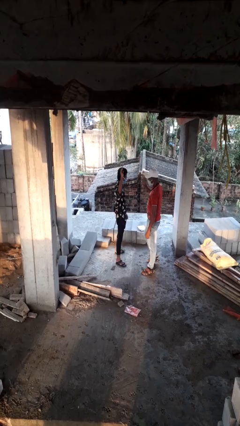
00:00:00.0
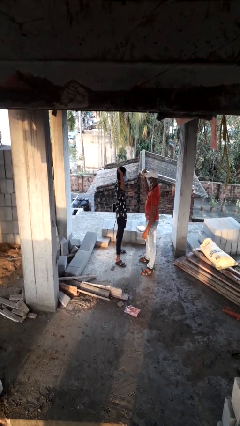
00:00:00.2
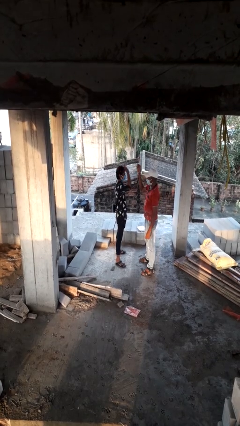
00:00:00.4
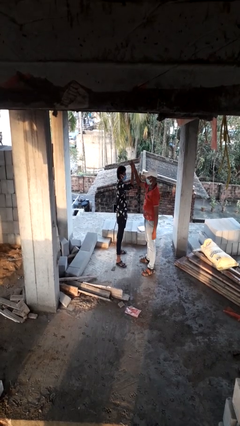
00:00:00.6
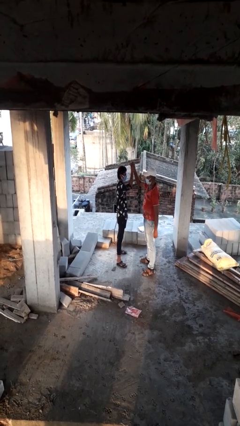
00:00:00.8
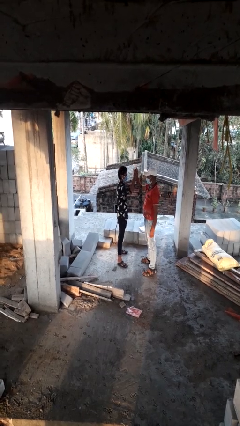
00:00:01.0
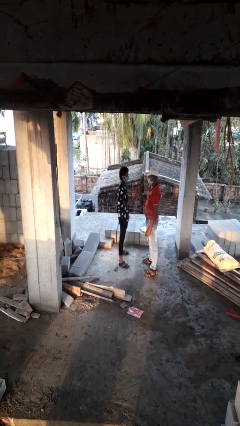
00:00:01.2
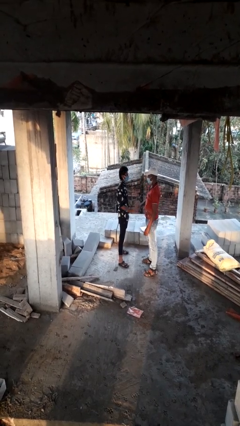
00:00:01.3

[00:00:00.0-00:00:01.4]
person highfives hand

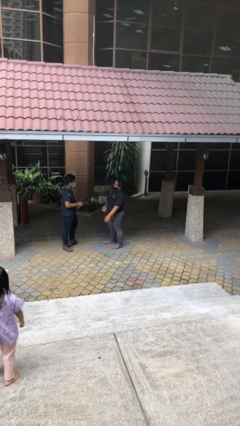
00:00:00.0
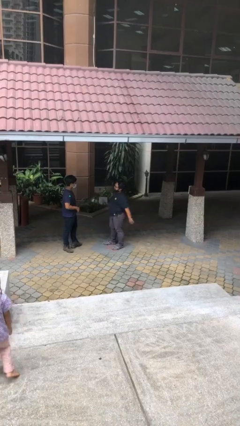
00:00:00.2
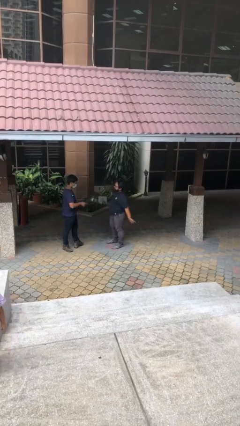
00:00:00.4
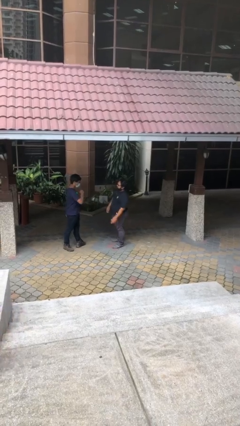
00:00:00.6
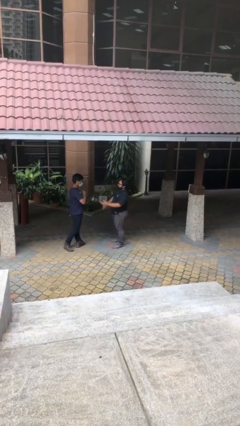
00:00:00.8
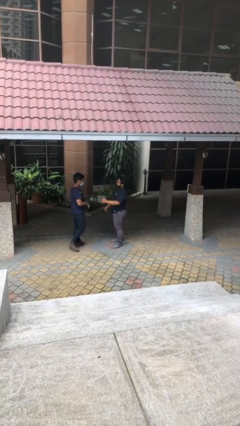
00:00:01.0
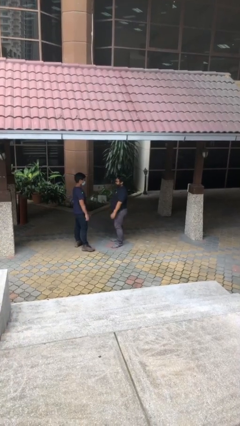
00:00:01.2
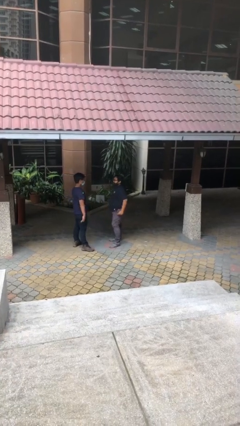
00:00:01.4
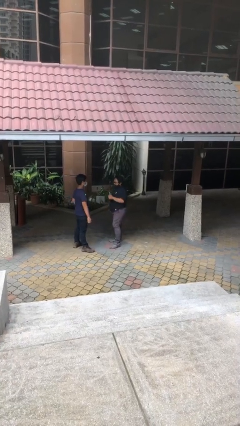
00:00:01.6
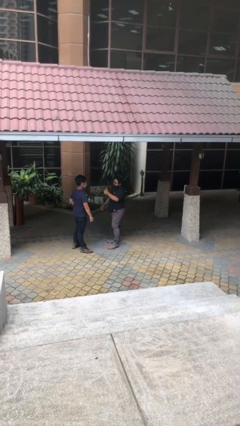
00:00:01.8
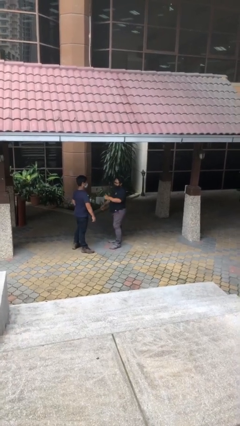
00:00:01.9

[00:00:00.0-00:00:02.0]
person talks to person

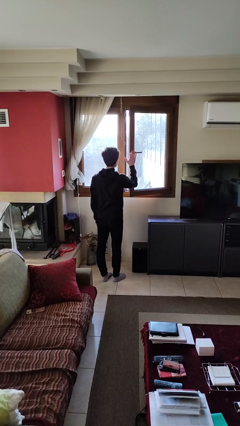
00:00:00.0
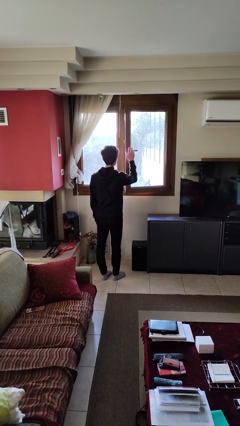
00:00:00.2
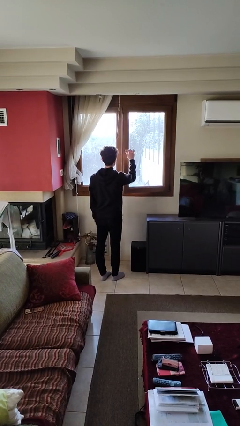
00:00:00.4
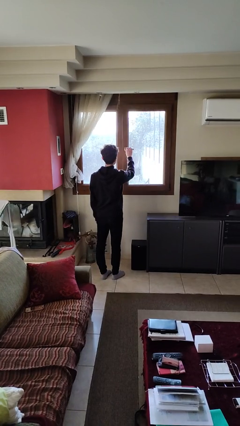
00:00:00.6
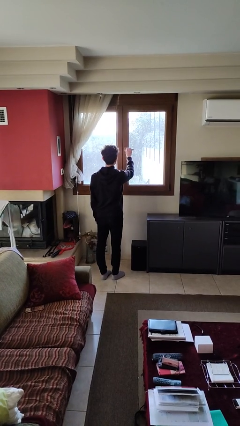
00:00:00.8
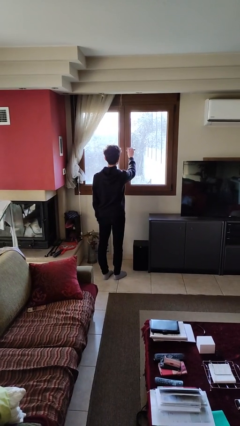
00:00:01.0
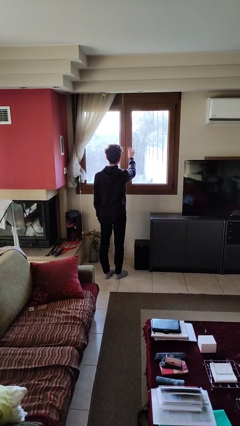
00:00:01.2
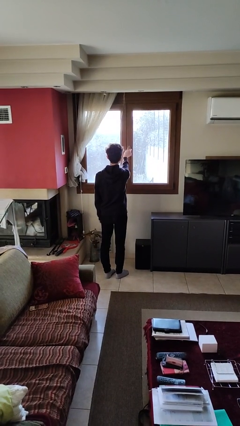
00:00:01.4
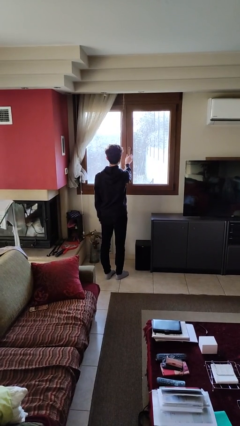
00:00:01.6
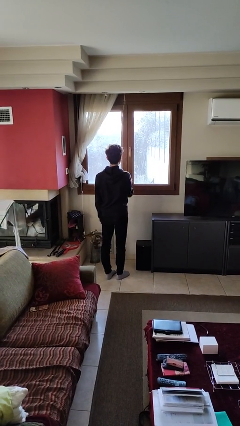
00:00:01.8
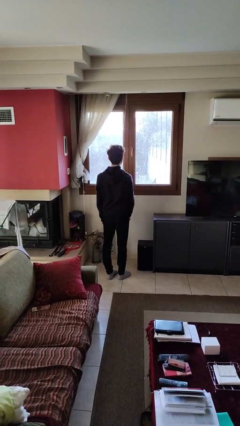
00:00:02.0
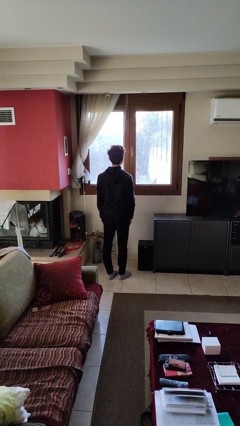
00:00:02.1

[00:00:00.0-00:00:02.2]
person closes home window

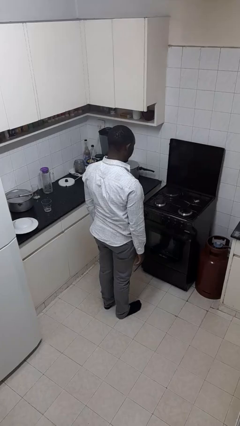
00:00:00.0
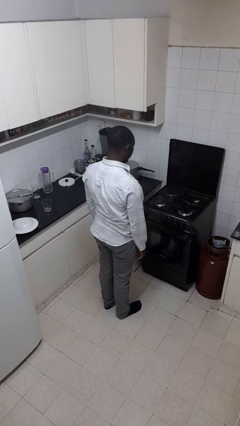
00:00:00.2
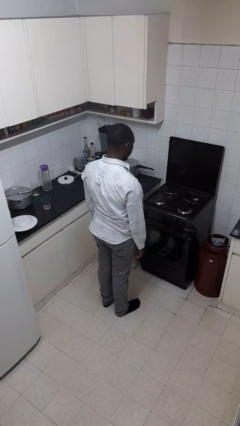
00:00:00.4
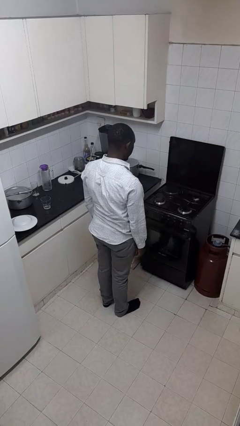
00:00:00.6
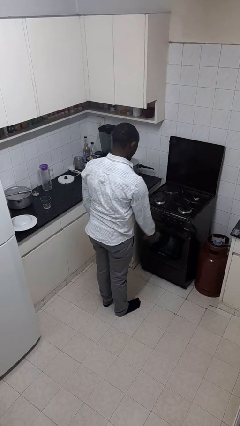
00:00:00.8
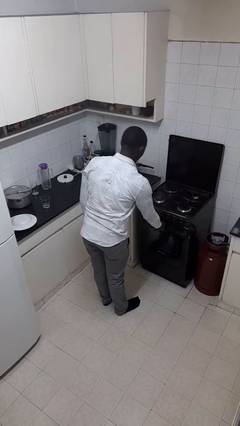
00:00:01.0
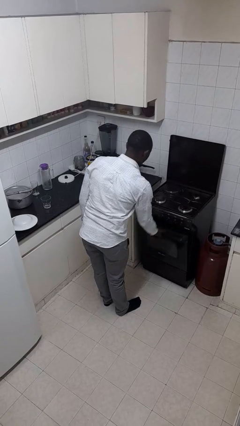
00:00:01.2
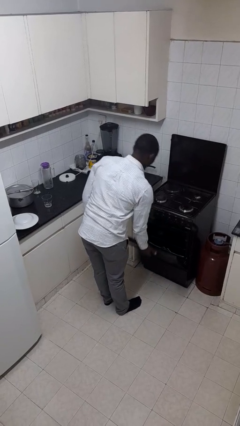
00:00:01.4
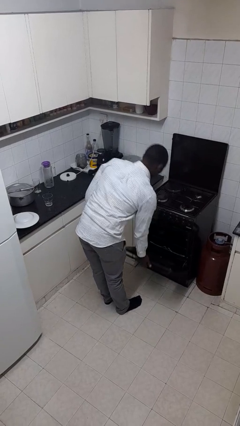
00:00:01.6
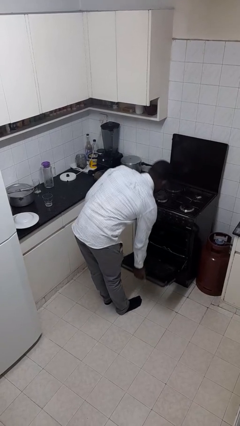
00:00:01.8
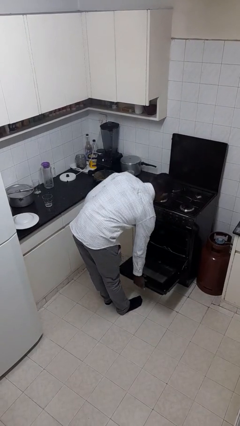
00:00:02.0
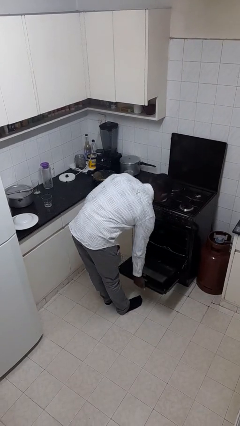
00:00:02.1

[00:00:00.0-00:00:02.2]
person opens oven door

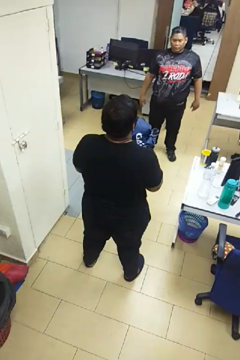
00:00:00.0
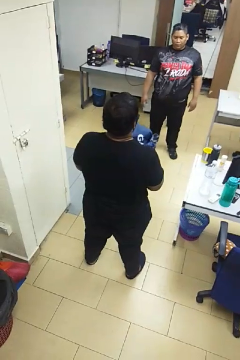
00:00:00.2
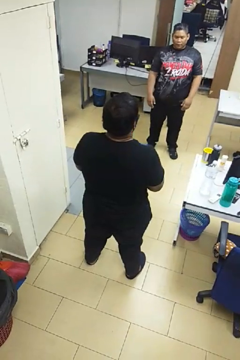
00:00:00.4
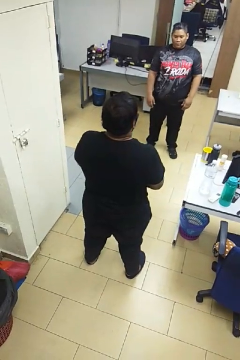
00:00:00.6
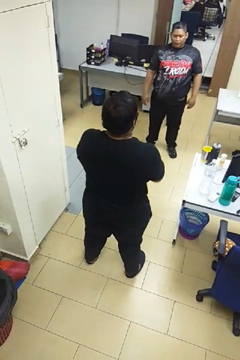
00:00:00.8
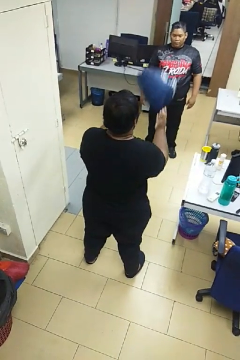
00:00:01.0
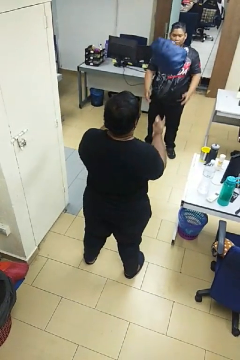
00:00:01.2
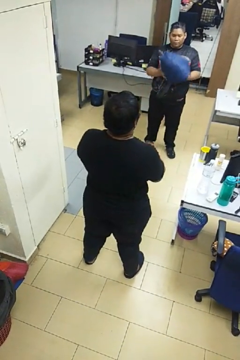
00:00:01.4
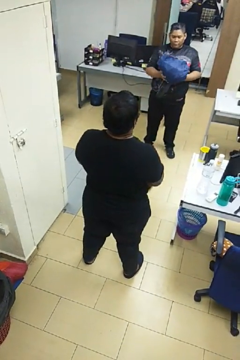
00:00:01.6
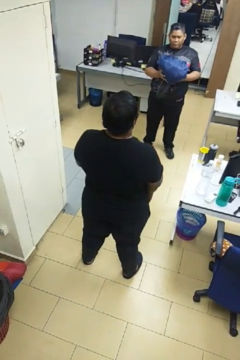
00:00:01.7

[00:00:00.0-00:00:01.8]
person throws object to person

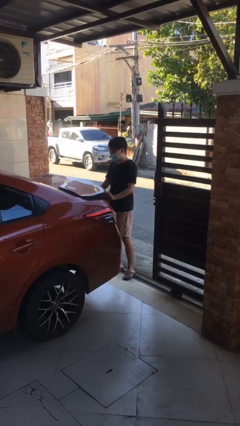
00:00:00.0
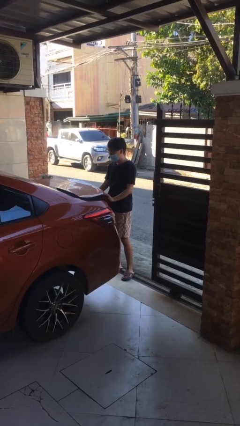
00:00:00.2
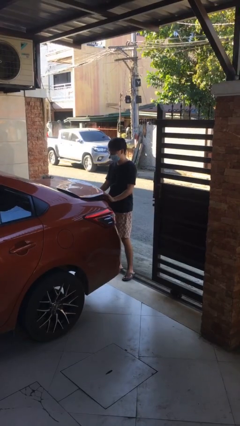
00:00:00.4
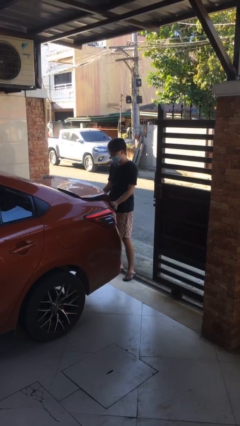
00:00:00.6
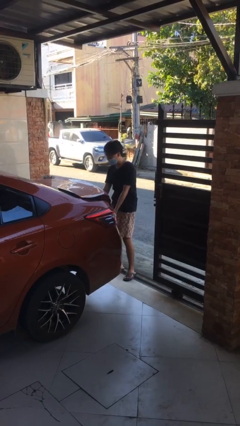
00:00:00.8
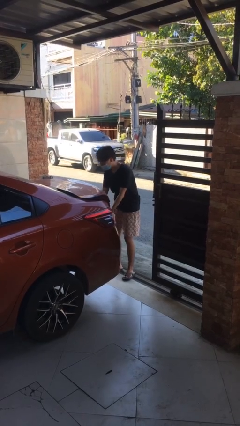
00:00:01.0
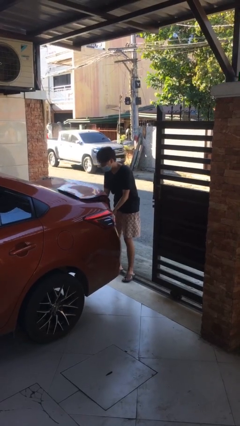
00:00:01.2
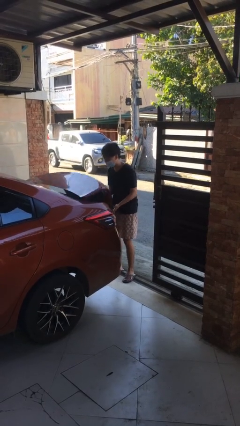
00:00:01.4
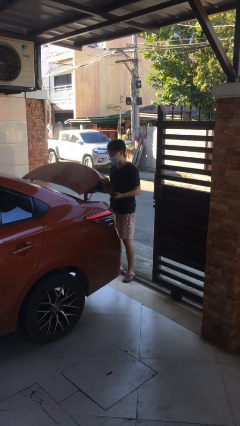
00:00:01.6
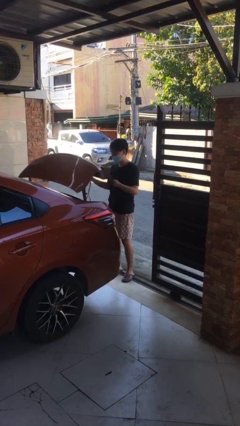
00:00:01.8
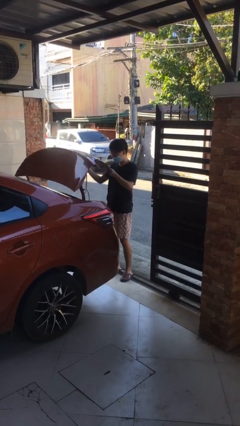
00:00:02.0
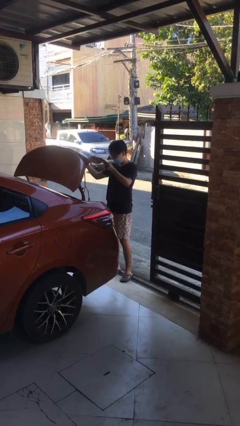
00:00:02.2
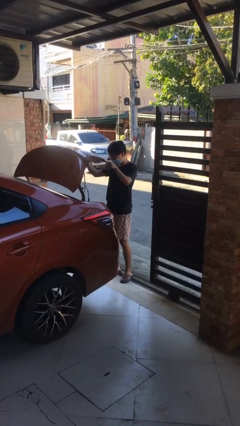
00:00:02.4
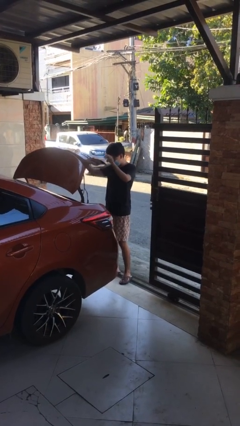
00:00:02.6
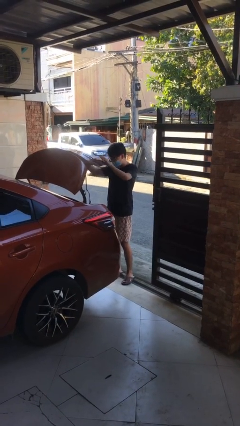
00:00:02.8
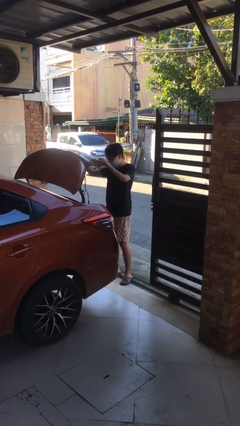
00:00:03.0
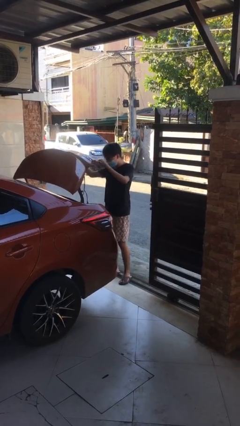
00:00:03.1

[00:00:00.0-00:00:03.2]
person opens car trunk

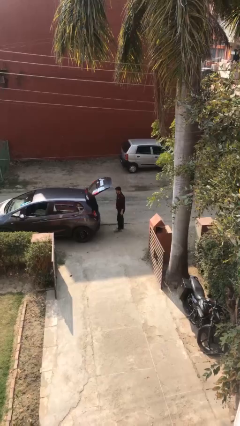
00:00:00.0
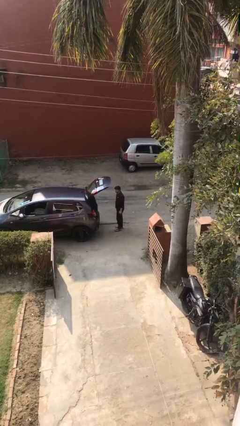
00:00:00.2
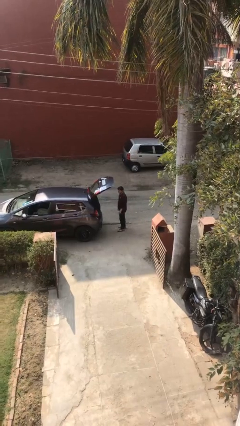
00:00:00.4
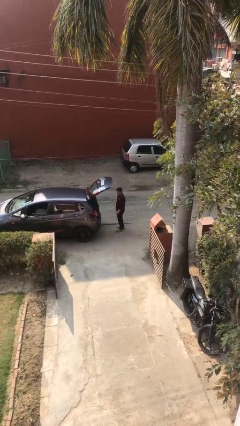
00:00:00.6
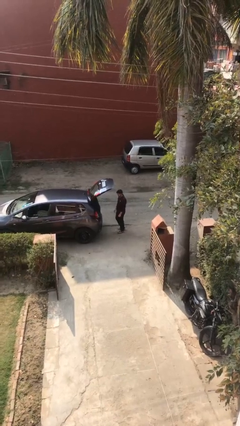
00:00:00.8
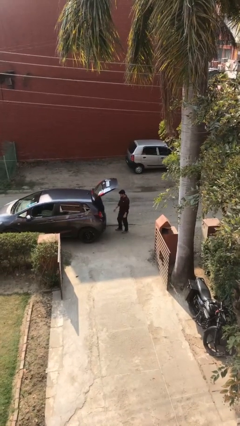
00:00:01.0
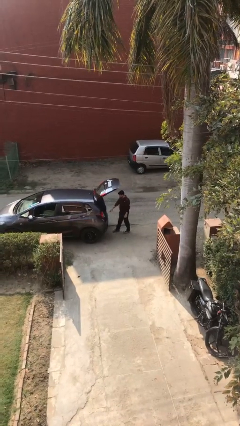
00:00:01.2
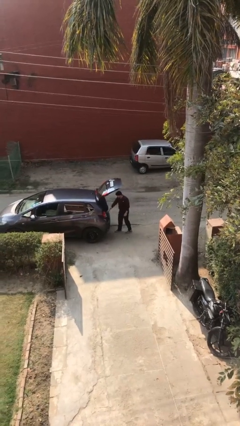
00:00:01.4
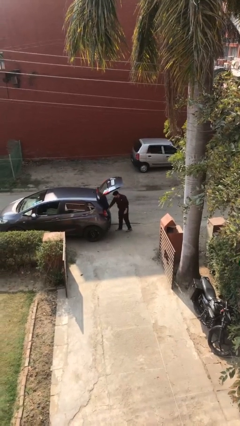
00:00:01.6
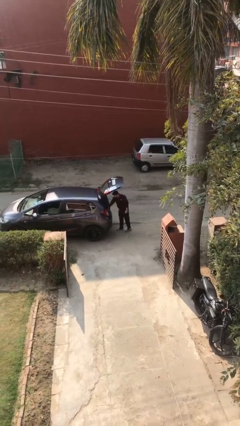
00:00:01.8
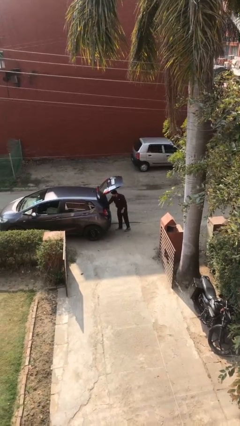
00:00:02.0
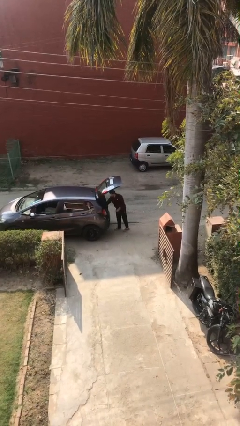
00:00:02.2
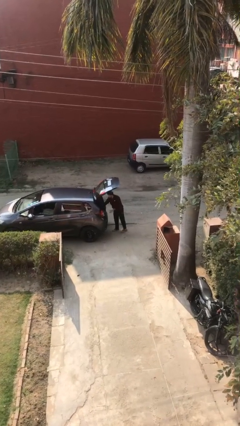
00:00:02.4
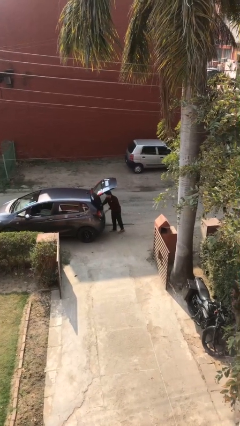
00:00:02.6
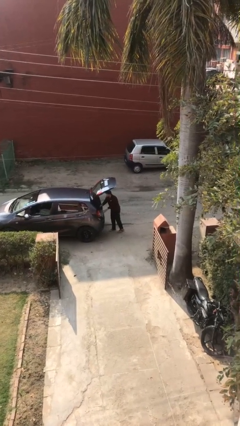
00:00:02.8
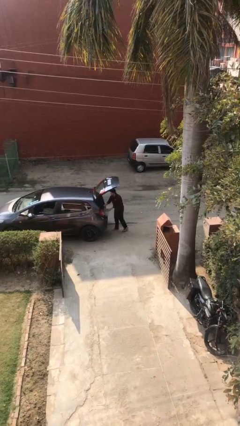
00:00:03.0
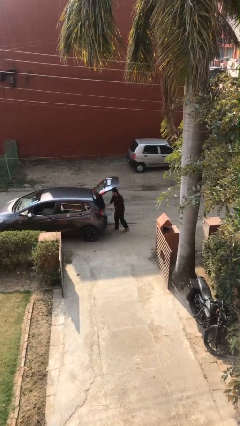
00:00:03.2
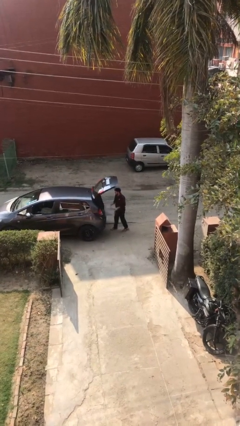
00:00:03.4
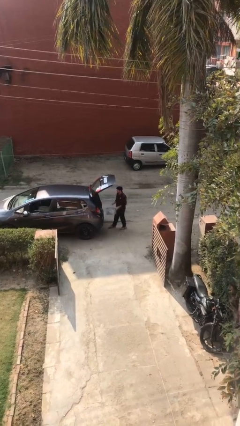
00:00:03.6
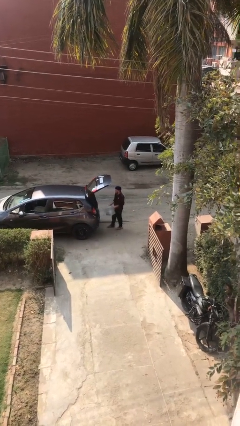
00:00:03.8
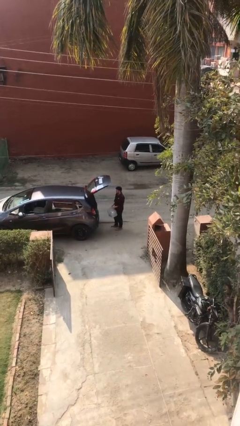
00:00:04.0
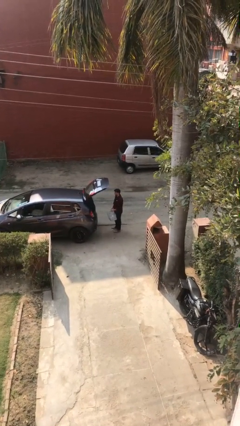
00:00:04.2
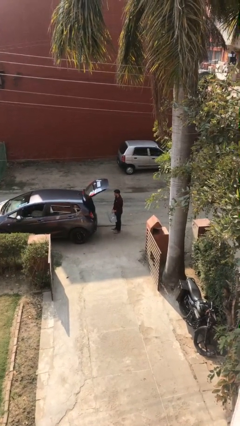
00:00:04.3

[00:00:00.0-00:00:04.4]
person unloads car
